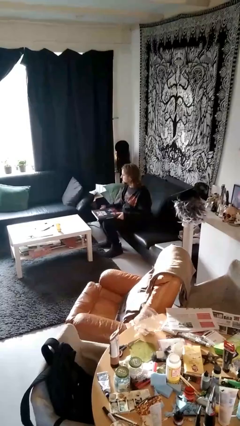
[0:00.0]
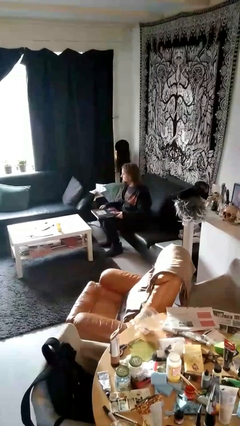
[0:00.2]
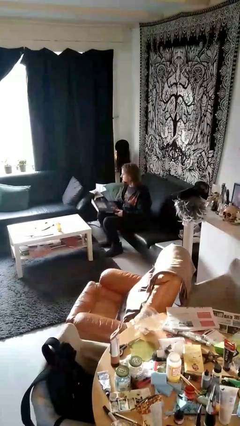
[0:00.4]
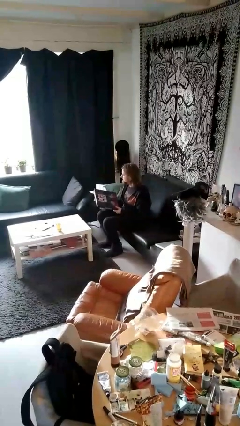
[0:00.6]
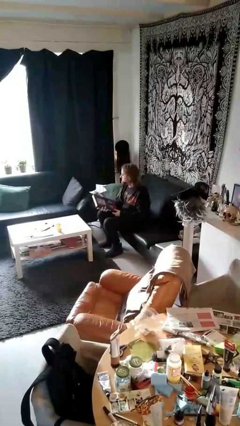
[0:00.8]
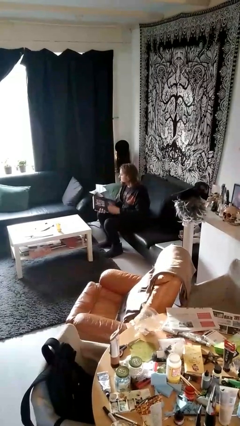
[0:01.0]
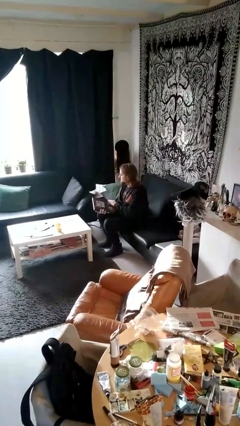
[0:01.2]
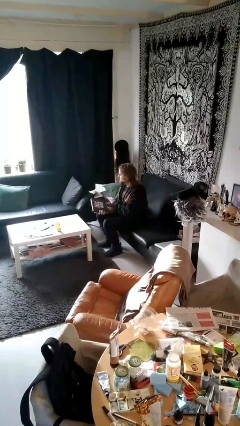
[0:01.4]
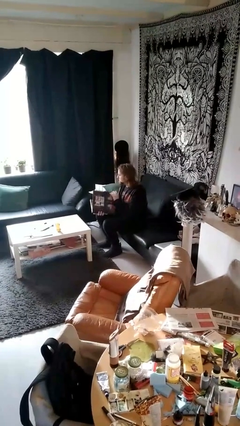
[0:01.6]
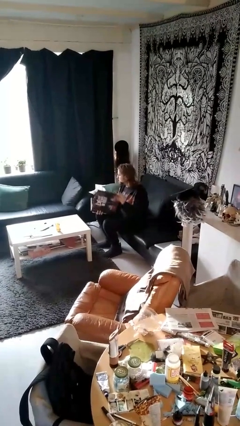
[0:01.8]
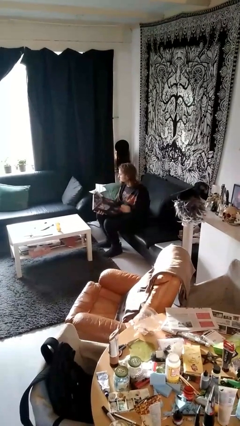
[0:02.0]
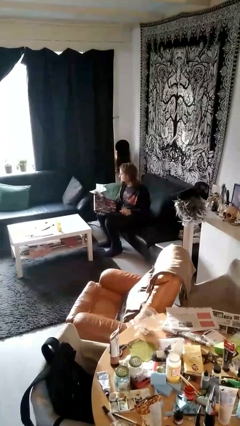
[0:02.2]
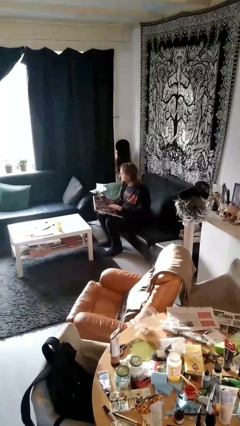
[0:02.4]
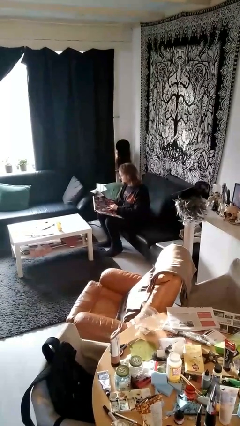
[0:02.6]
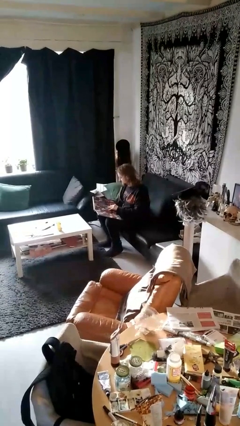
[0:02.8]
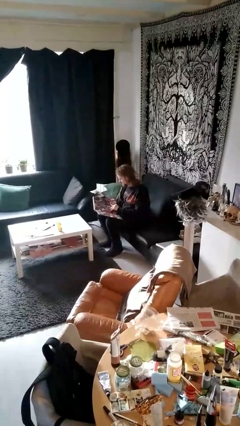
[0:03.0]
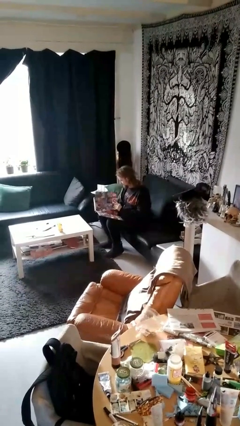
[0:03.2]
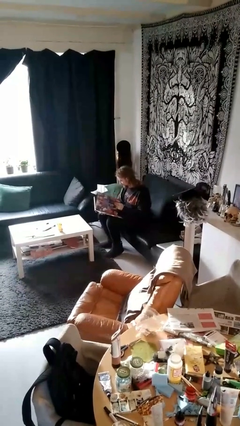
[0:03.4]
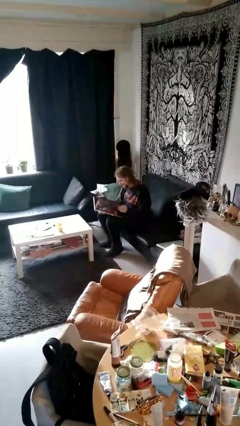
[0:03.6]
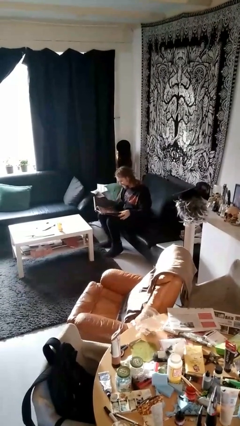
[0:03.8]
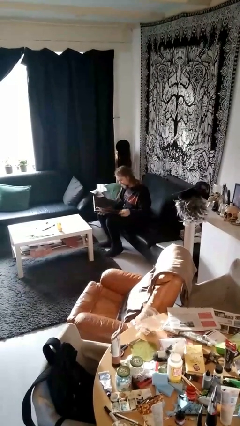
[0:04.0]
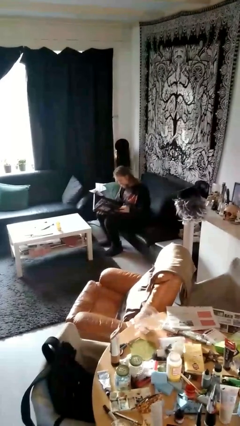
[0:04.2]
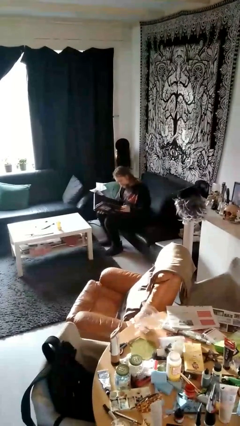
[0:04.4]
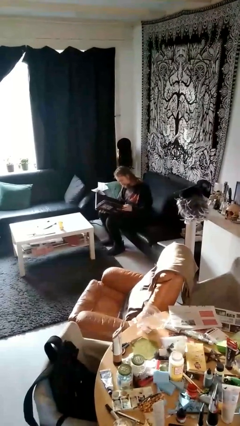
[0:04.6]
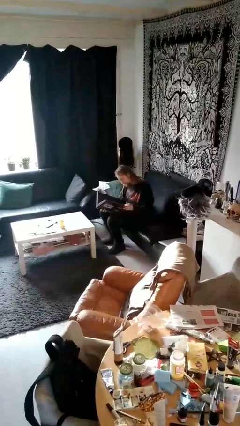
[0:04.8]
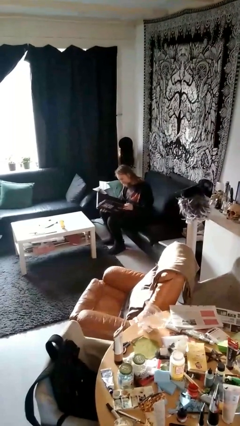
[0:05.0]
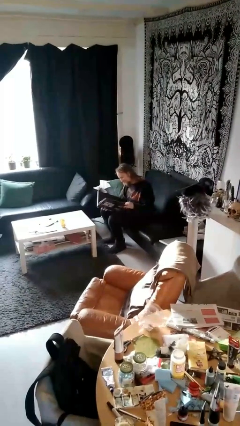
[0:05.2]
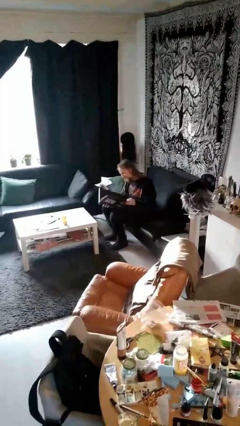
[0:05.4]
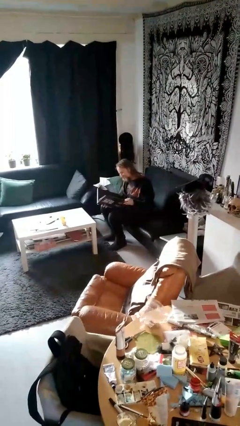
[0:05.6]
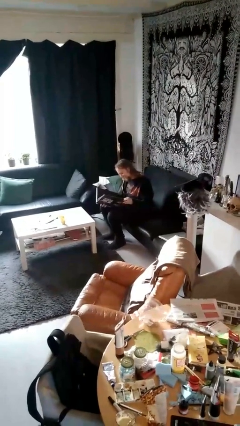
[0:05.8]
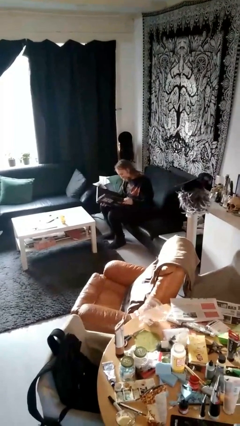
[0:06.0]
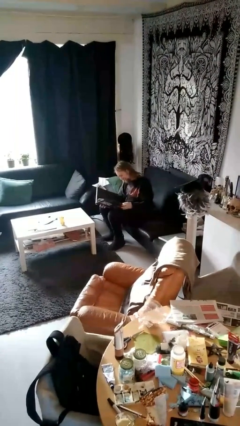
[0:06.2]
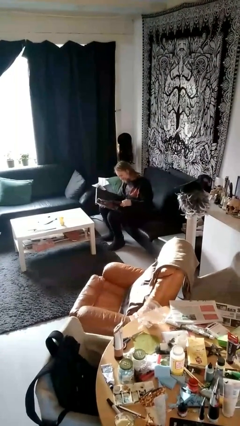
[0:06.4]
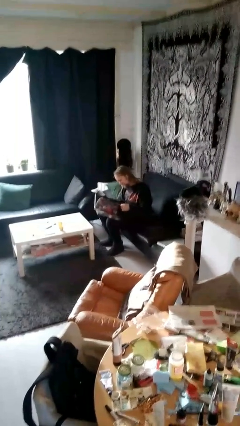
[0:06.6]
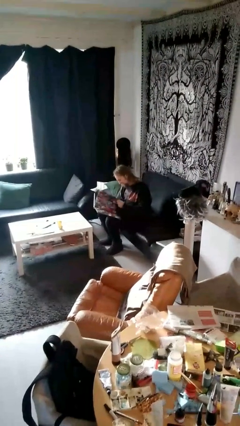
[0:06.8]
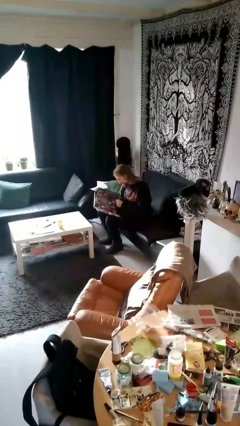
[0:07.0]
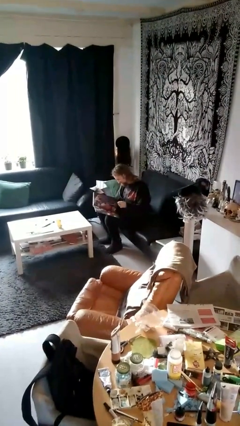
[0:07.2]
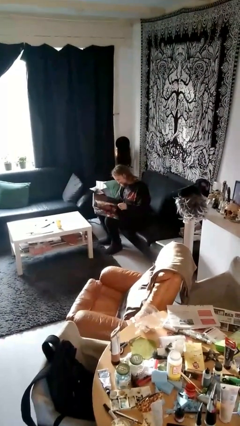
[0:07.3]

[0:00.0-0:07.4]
person reads document

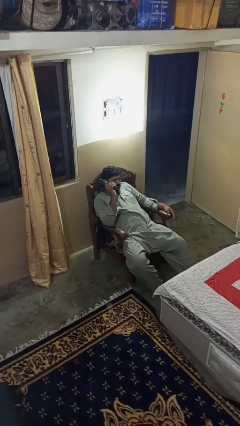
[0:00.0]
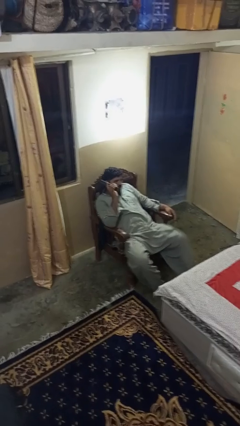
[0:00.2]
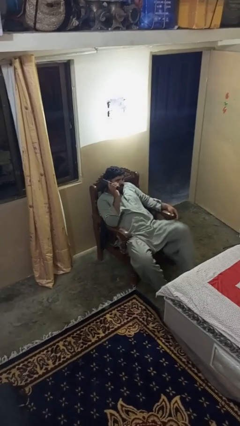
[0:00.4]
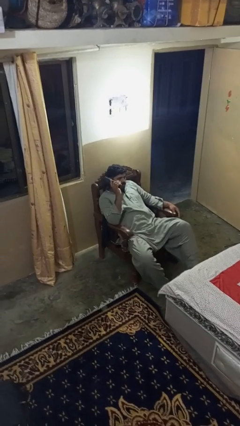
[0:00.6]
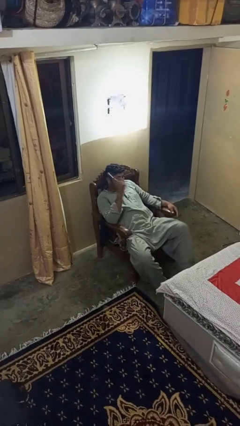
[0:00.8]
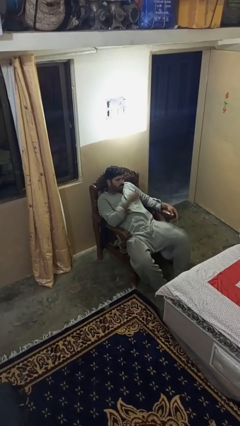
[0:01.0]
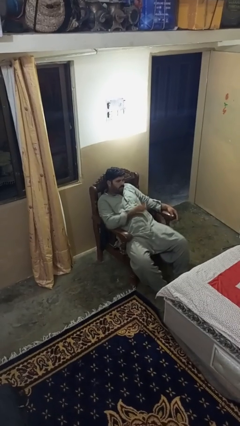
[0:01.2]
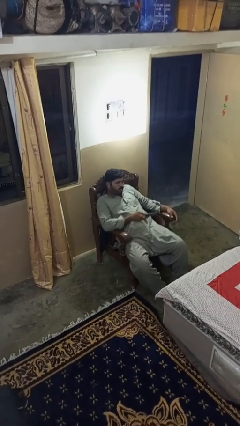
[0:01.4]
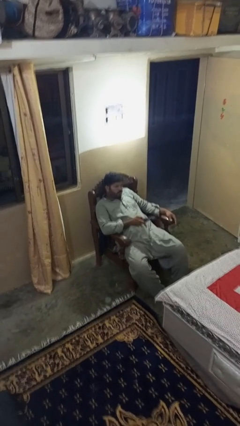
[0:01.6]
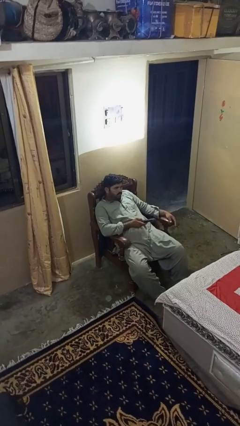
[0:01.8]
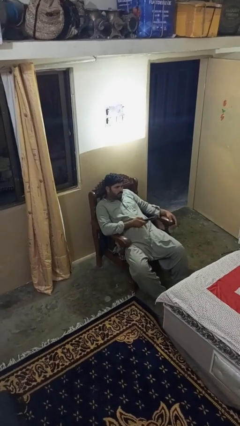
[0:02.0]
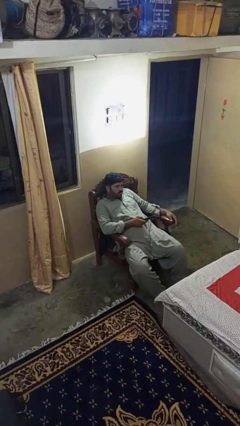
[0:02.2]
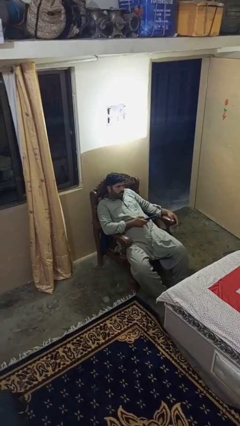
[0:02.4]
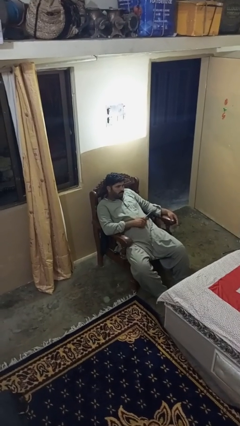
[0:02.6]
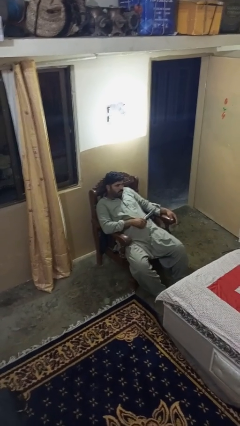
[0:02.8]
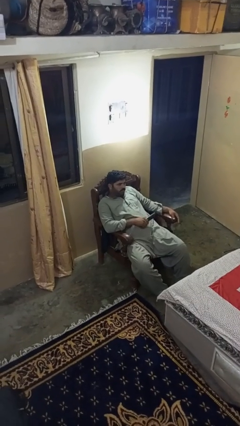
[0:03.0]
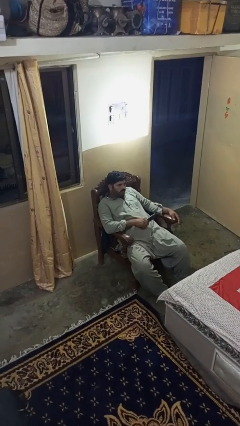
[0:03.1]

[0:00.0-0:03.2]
person uses television remote

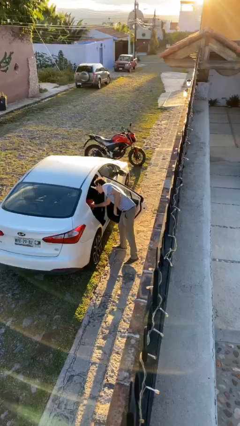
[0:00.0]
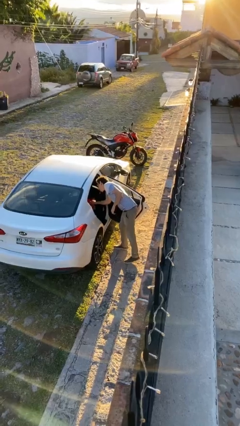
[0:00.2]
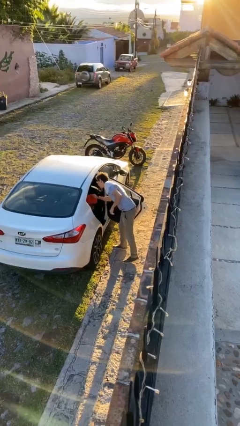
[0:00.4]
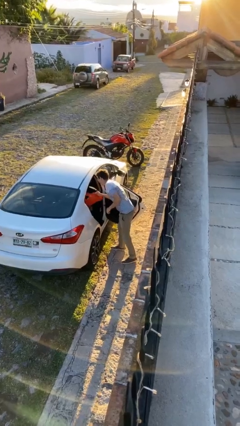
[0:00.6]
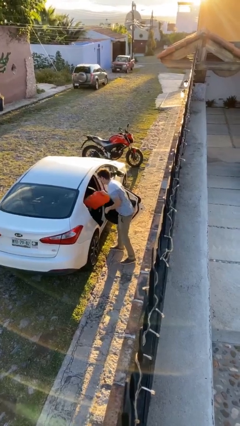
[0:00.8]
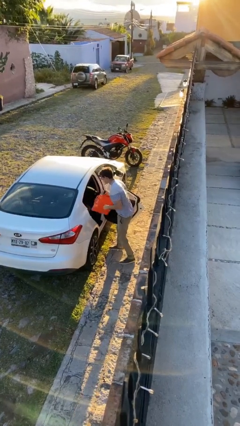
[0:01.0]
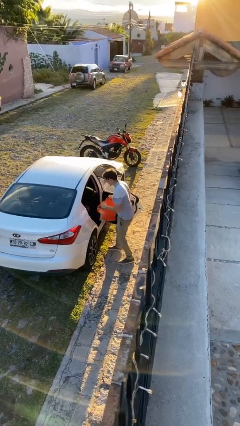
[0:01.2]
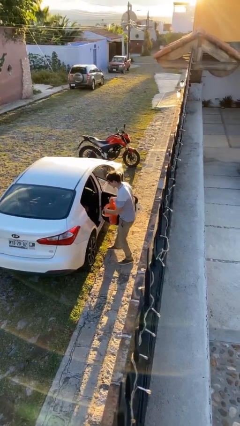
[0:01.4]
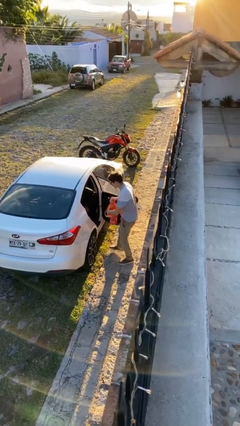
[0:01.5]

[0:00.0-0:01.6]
person unloads car

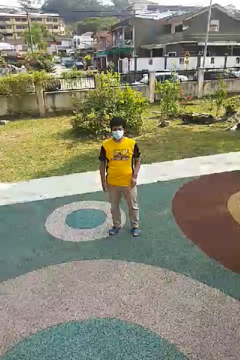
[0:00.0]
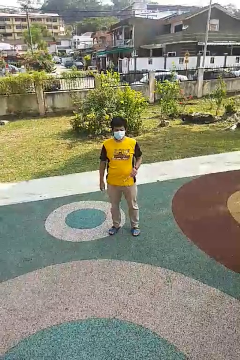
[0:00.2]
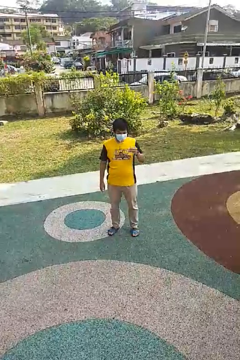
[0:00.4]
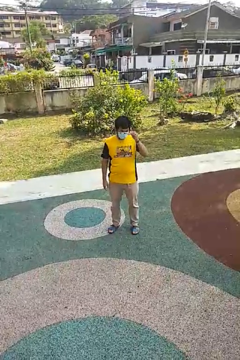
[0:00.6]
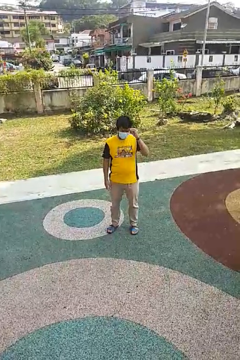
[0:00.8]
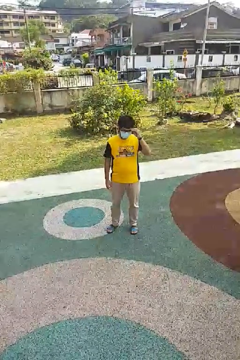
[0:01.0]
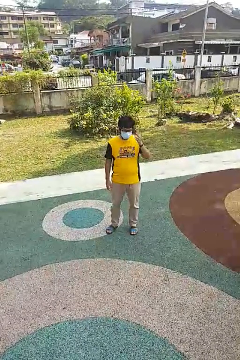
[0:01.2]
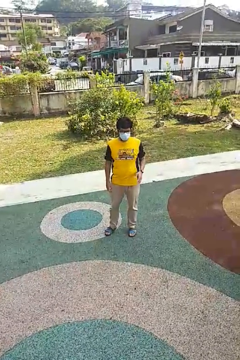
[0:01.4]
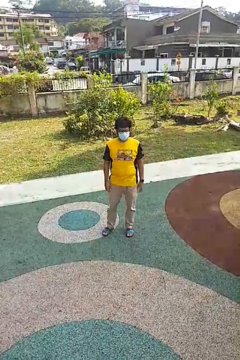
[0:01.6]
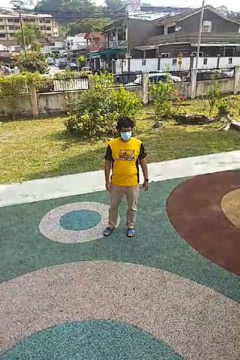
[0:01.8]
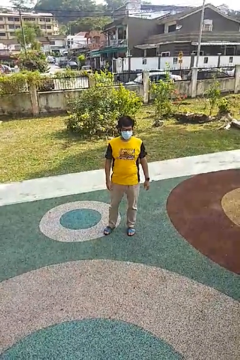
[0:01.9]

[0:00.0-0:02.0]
person puts on glasses

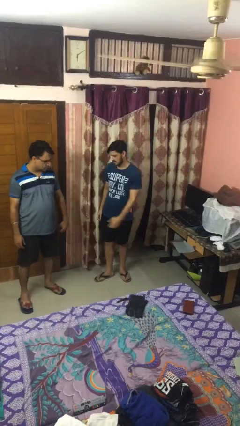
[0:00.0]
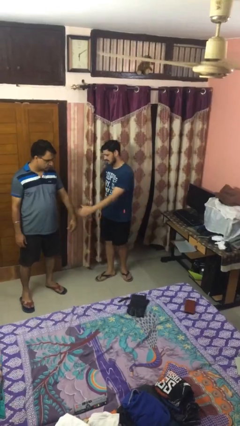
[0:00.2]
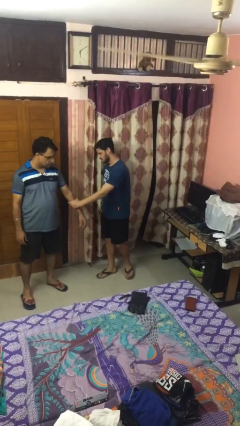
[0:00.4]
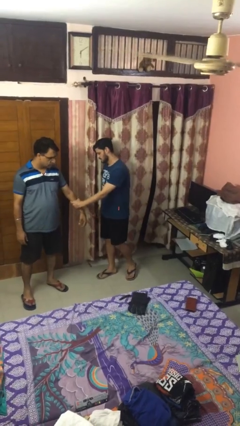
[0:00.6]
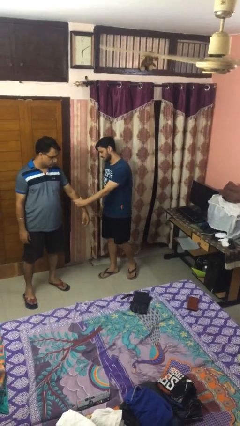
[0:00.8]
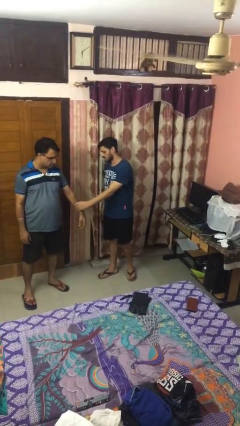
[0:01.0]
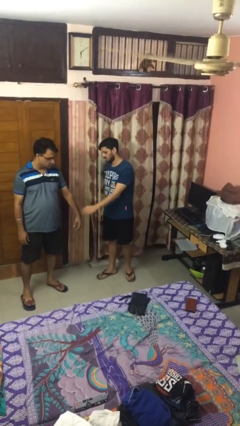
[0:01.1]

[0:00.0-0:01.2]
person grabs person by forearm

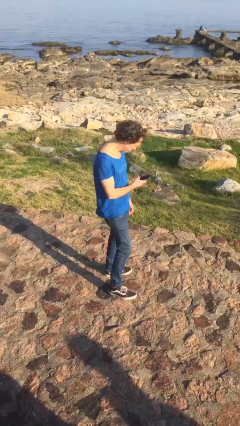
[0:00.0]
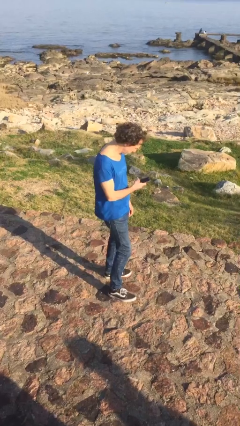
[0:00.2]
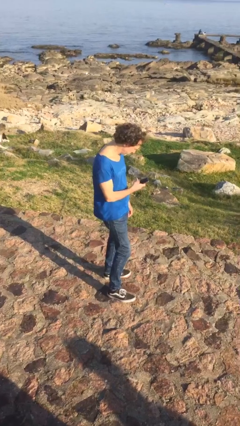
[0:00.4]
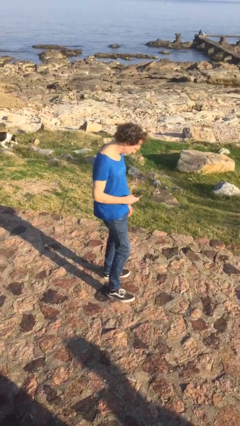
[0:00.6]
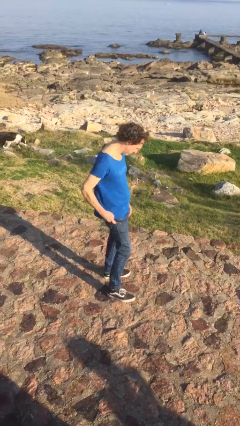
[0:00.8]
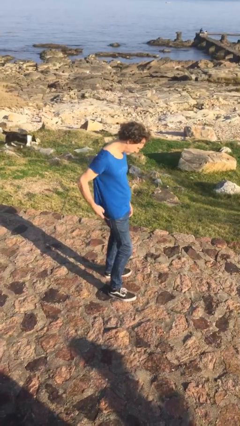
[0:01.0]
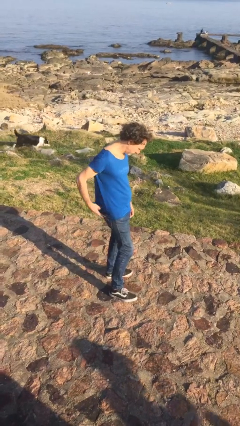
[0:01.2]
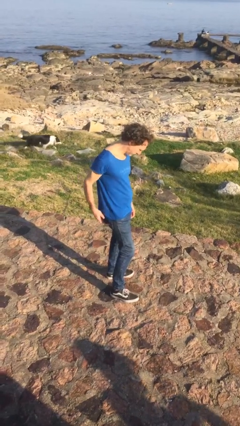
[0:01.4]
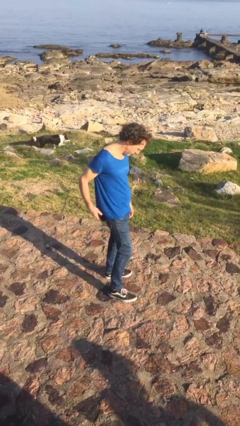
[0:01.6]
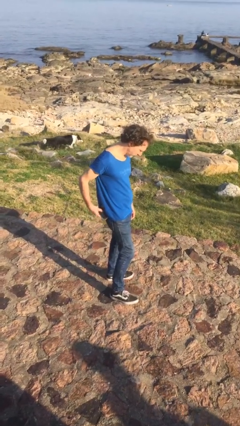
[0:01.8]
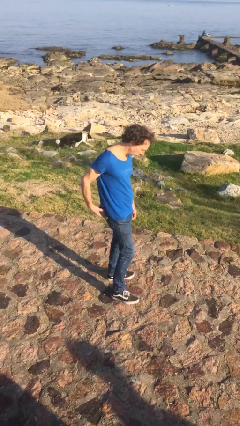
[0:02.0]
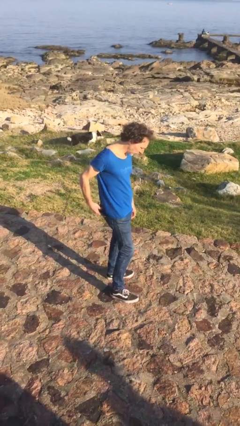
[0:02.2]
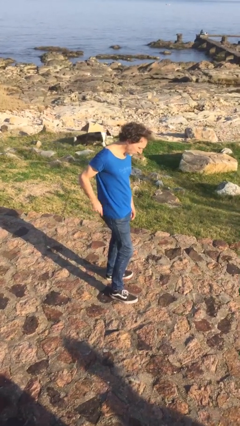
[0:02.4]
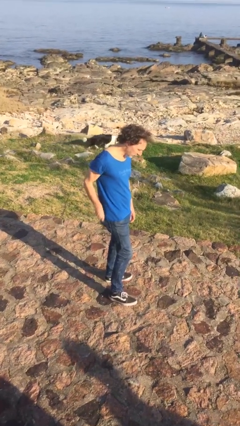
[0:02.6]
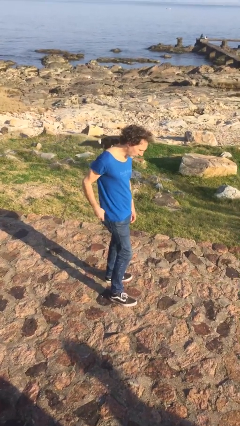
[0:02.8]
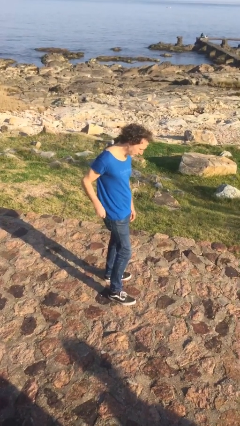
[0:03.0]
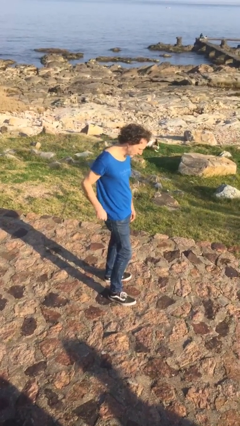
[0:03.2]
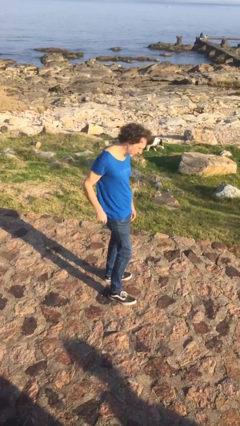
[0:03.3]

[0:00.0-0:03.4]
person puts phone into pocket
